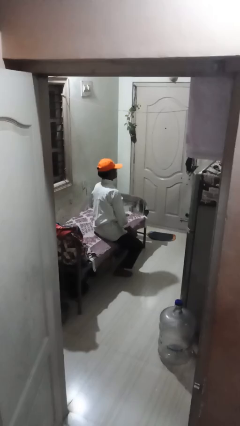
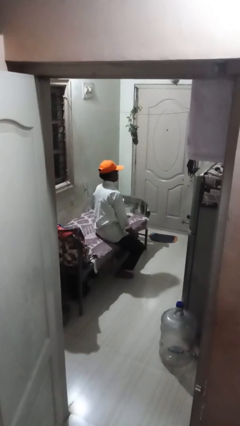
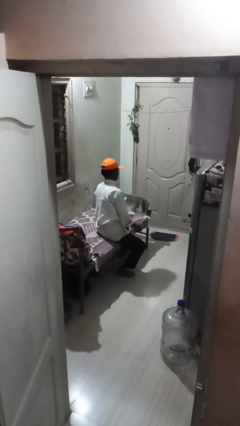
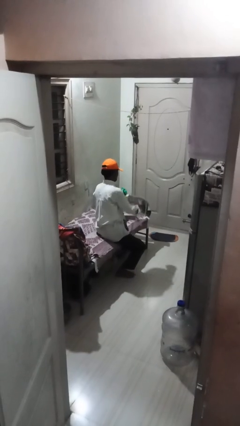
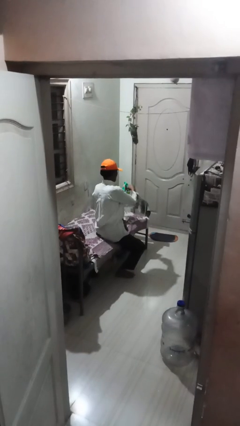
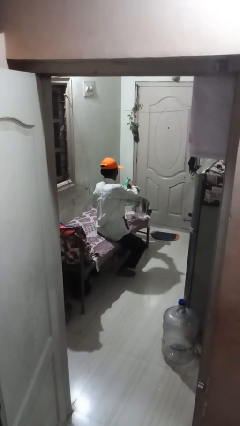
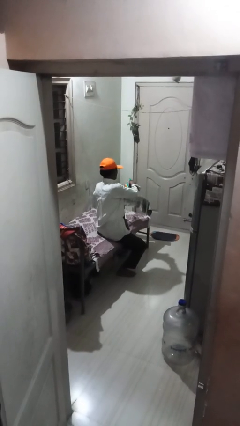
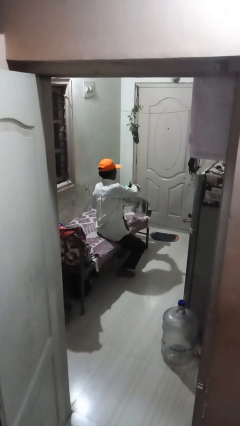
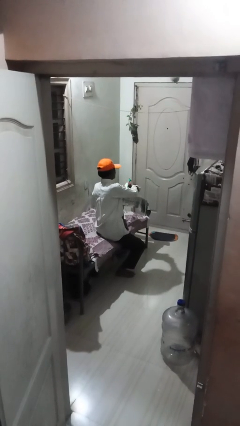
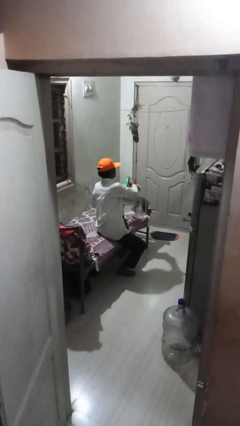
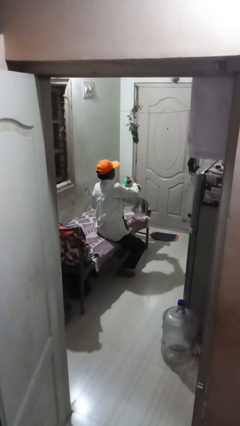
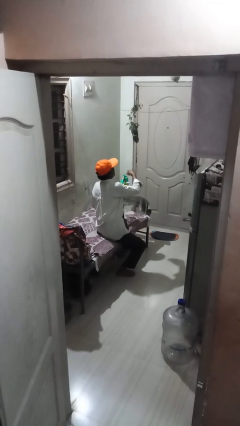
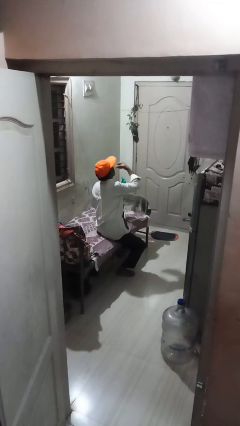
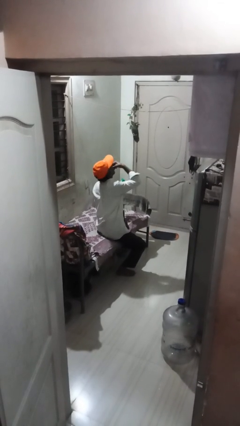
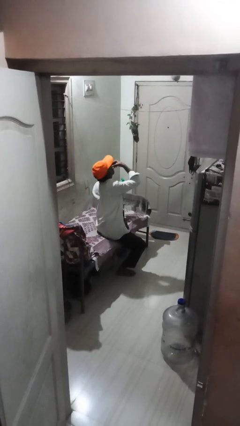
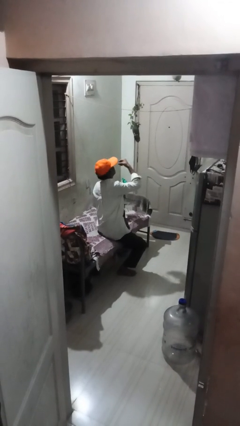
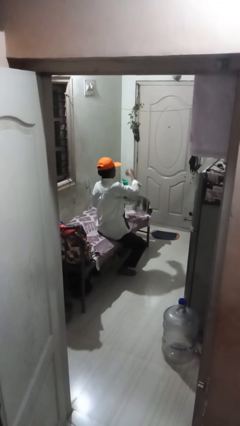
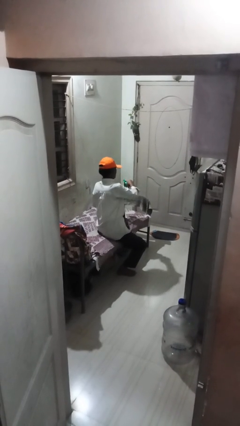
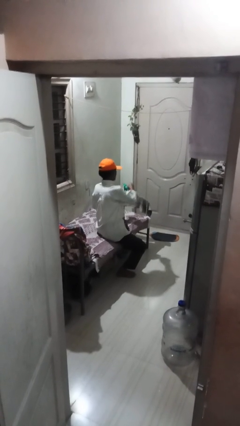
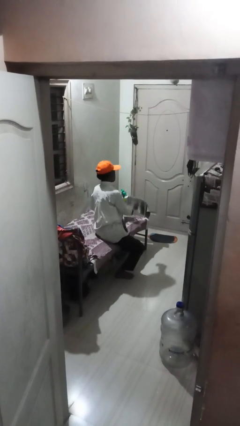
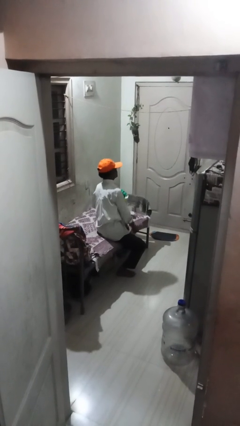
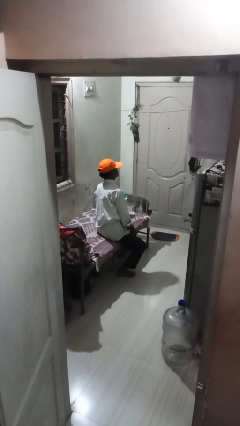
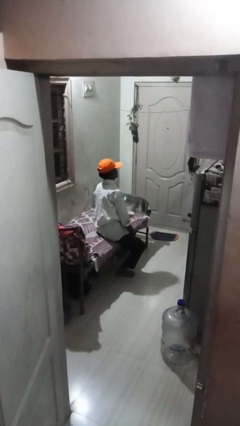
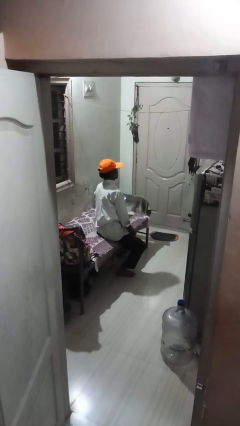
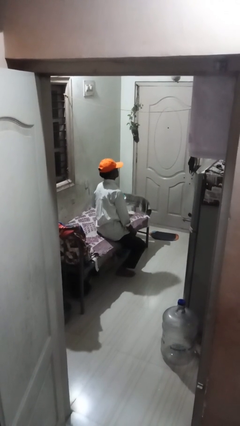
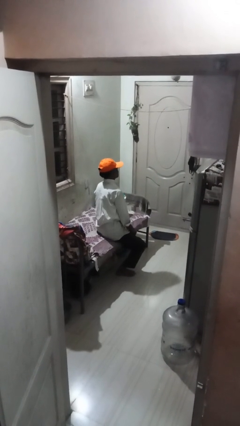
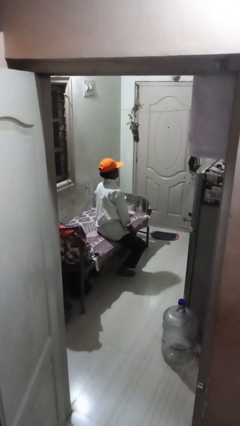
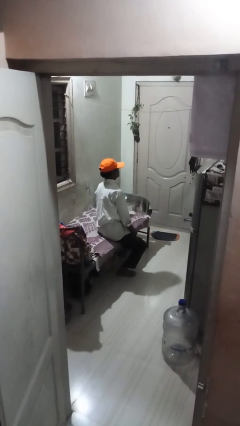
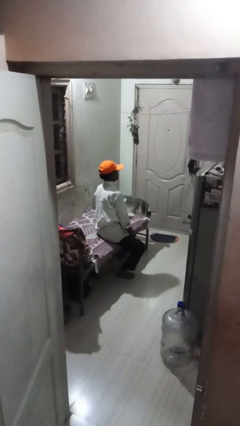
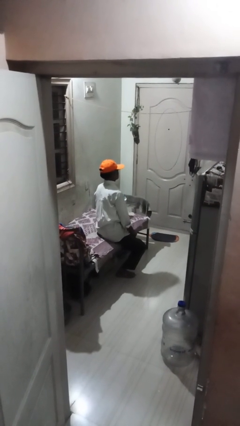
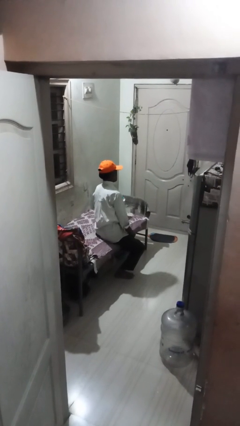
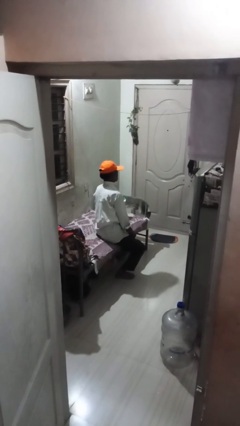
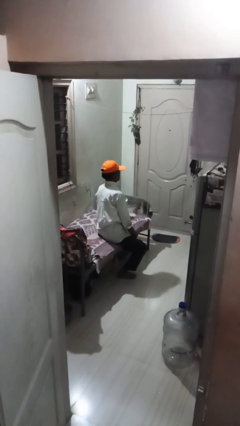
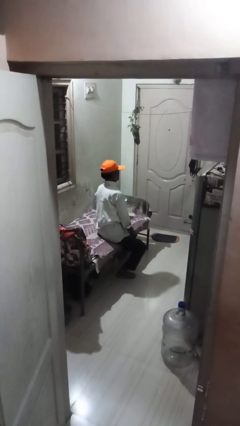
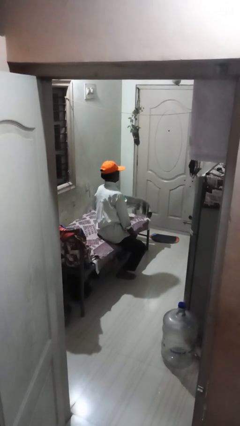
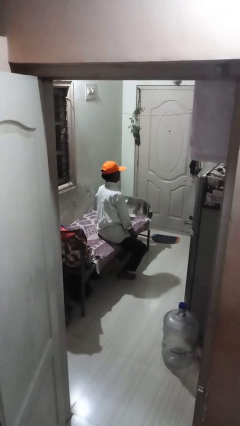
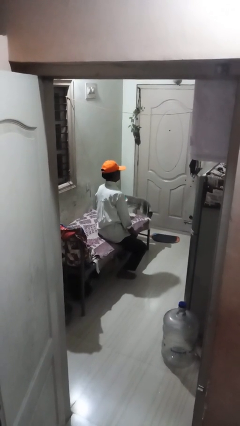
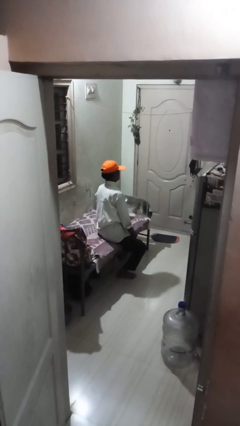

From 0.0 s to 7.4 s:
person eats snack from bag

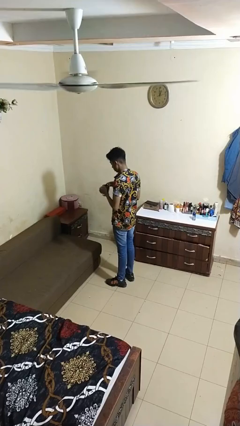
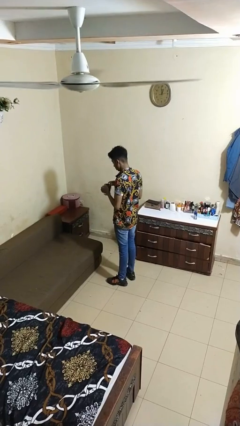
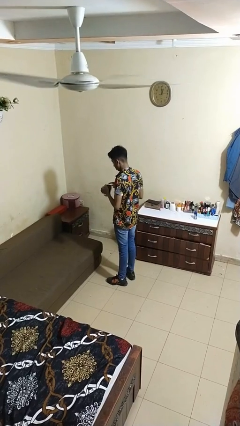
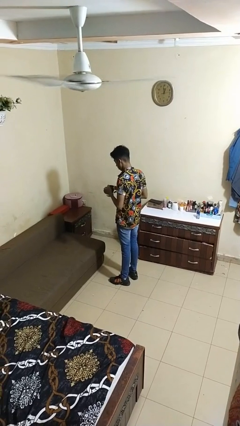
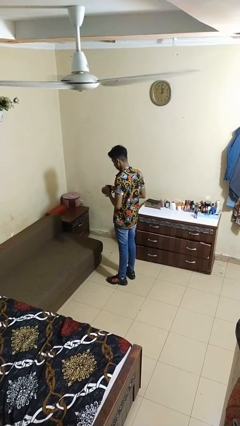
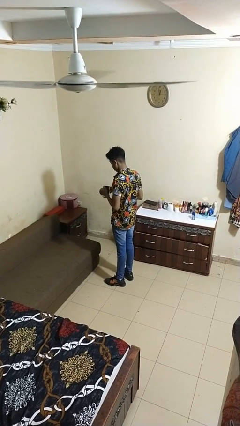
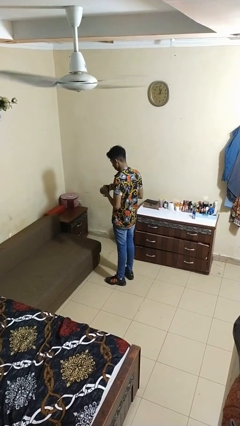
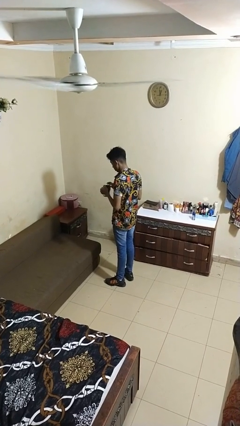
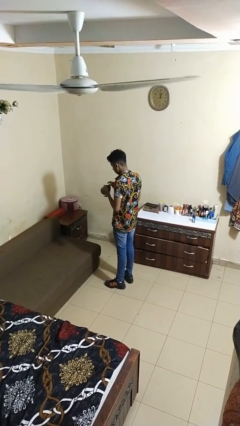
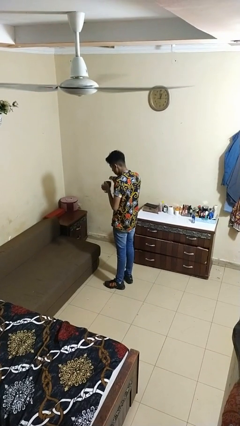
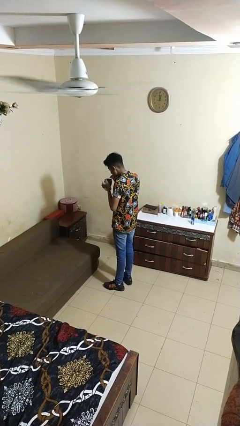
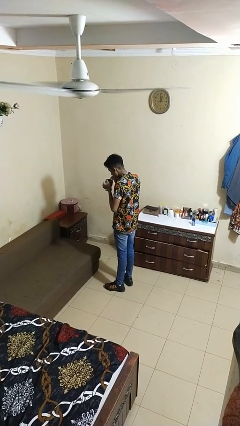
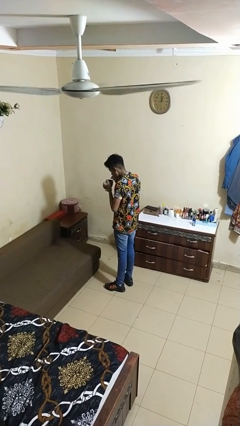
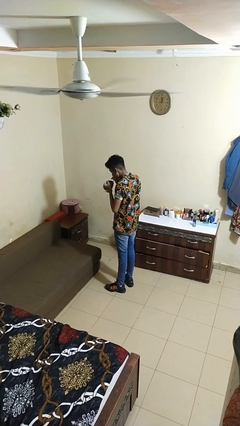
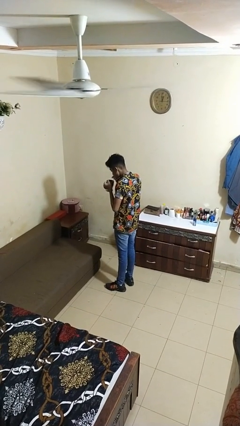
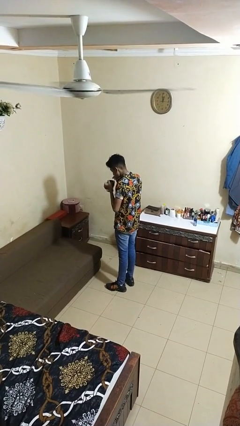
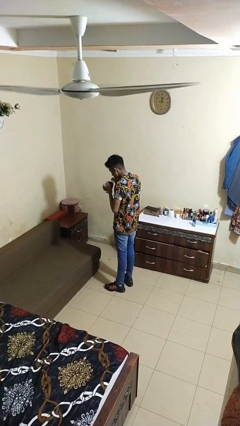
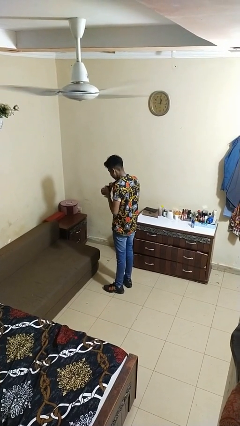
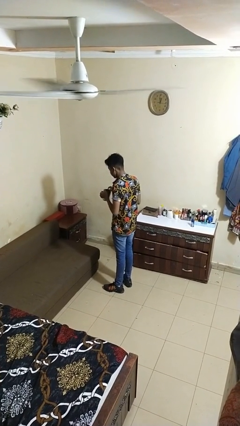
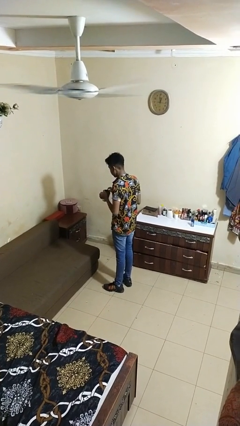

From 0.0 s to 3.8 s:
person drinks from straw

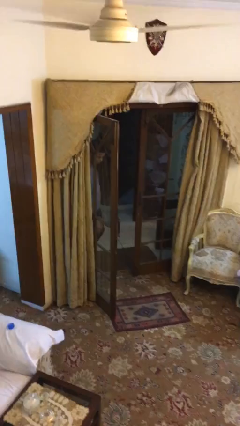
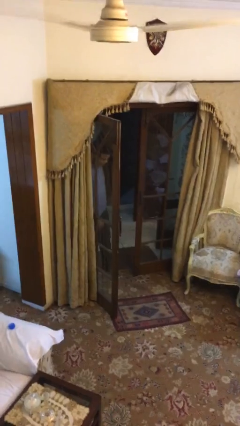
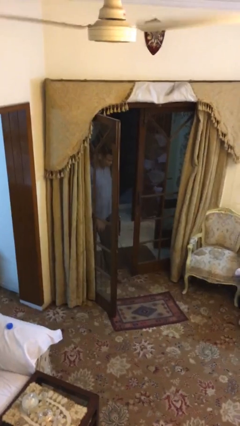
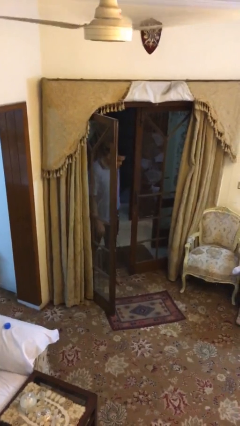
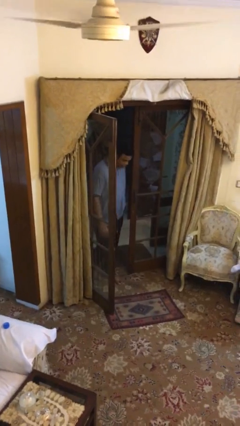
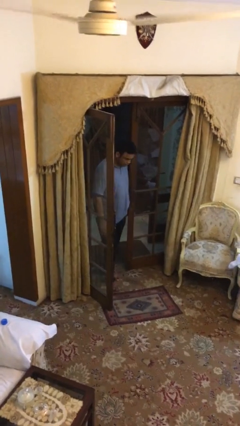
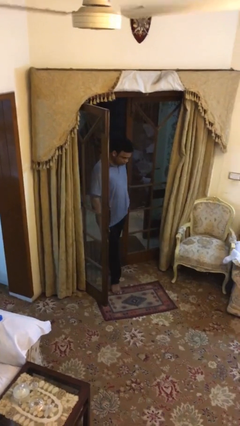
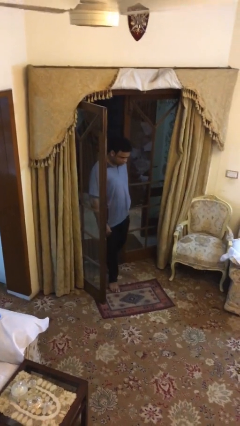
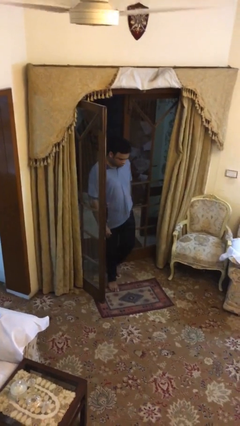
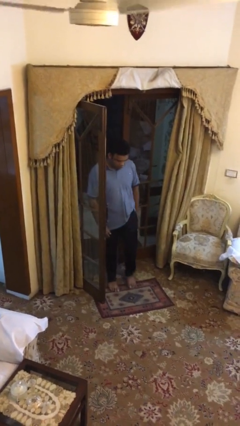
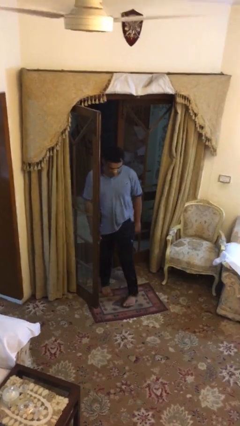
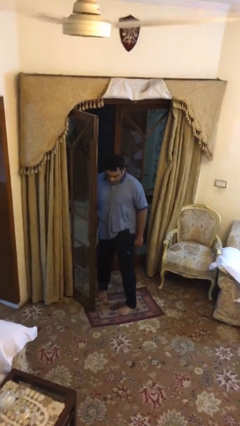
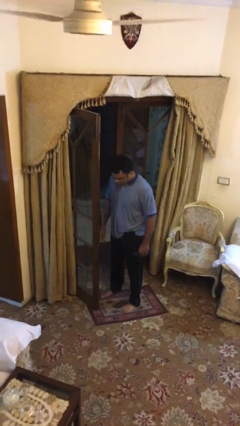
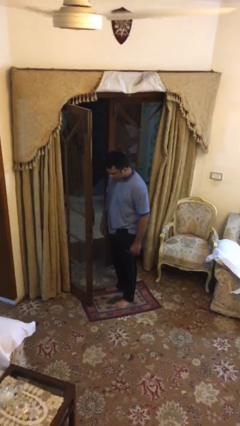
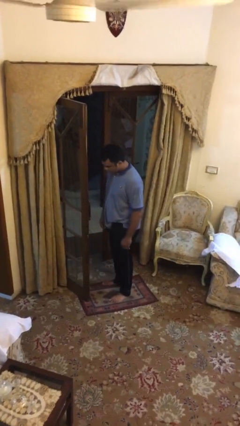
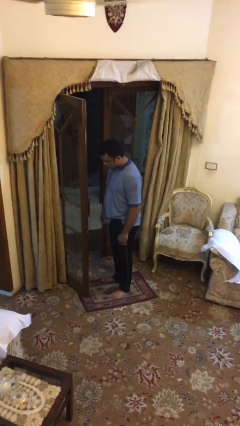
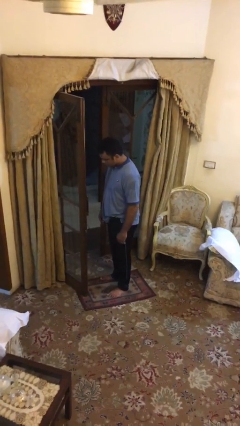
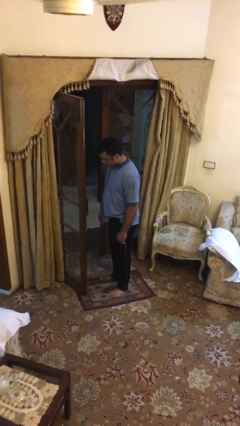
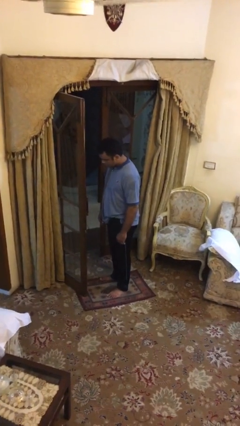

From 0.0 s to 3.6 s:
person enters scene through structure

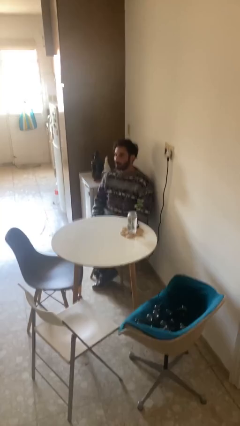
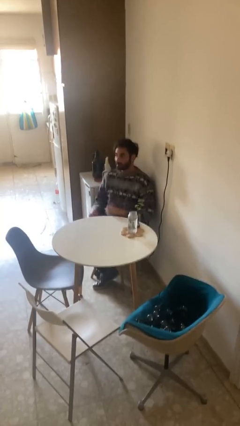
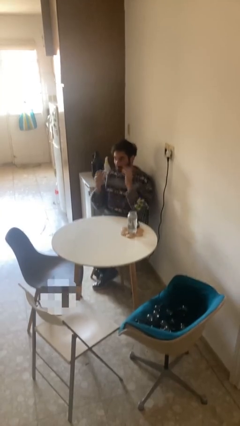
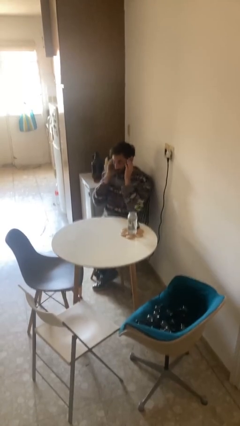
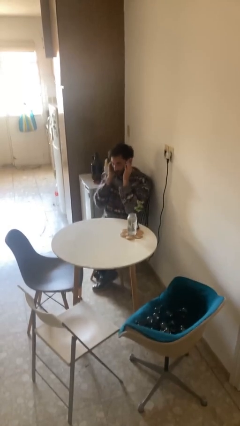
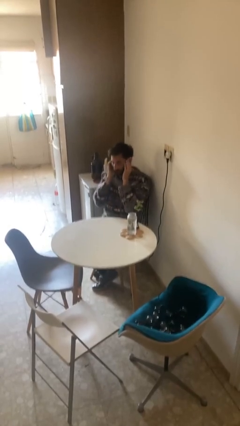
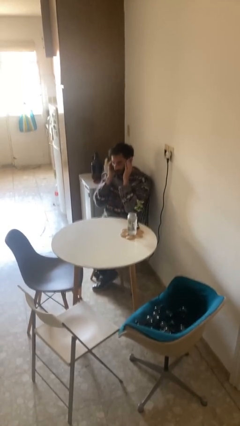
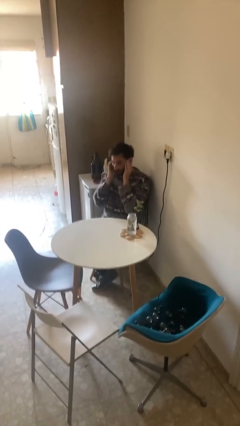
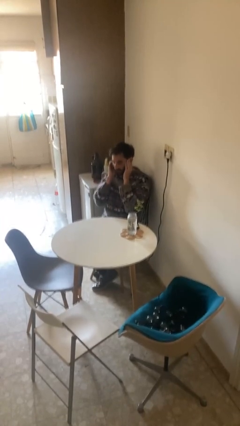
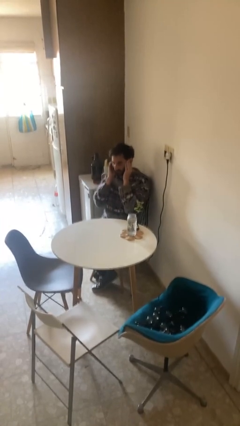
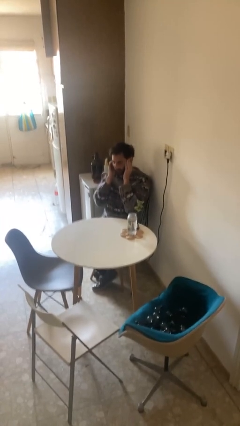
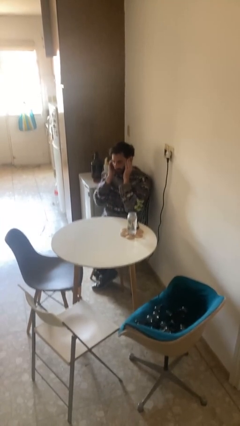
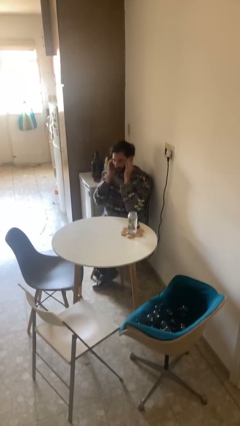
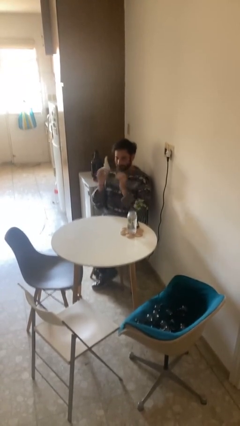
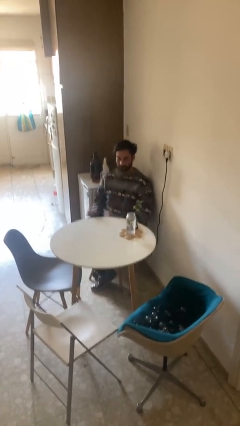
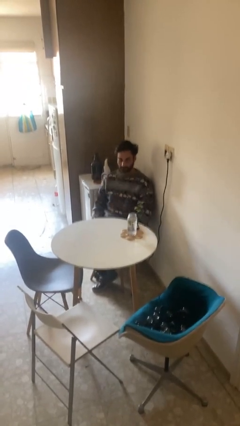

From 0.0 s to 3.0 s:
person puts fingers in ear
